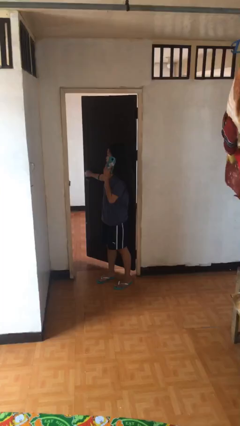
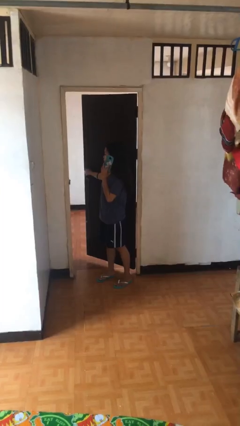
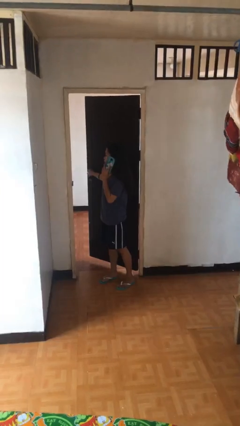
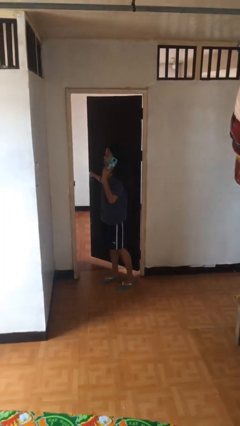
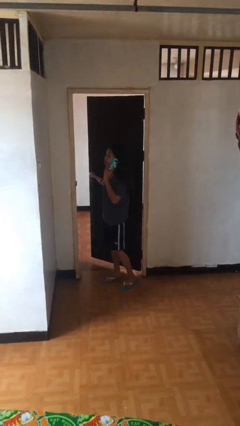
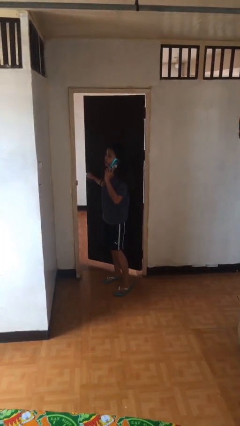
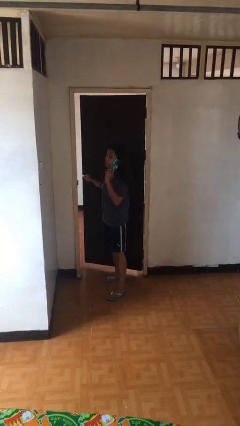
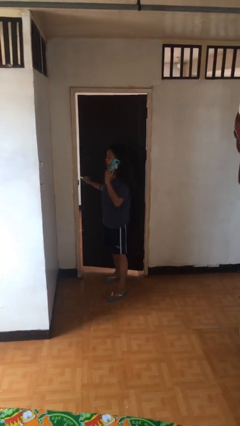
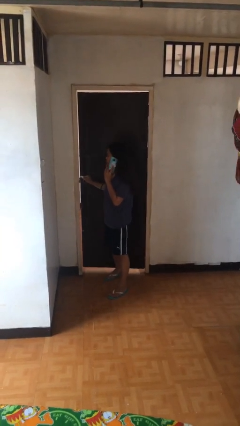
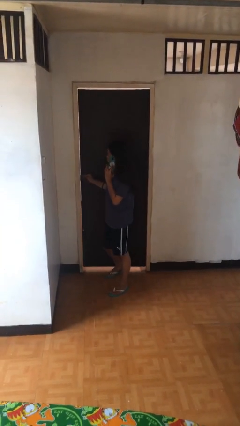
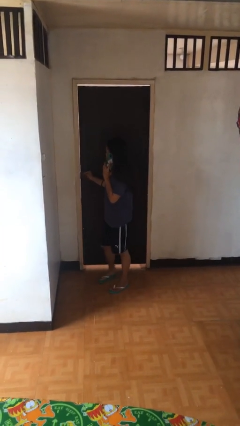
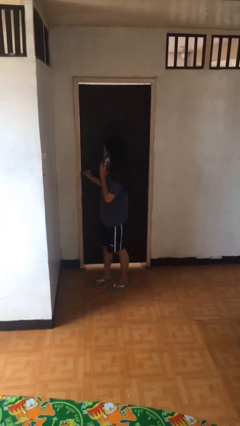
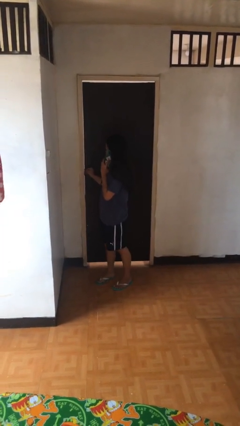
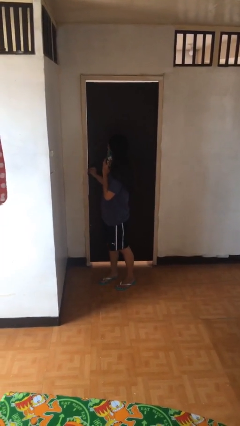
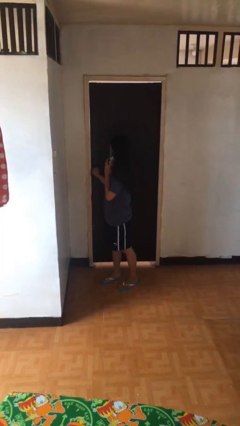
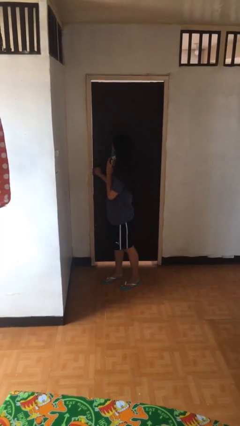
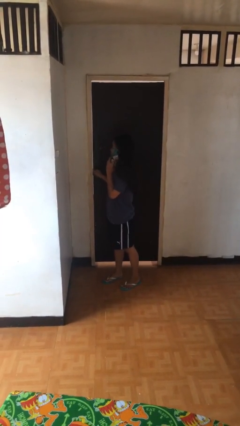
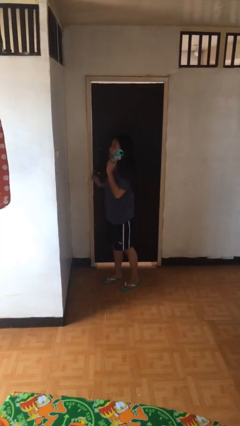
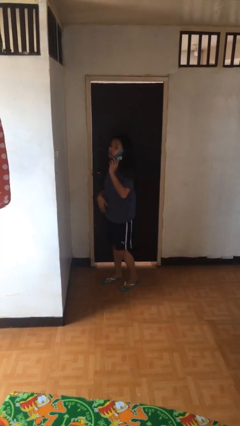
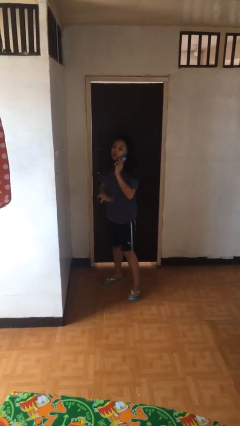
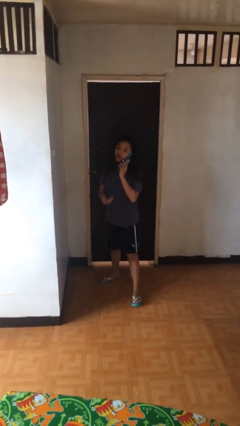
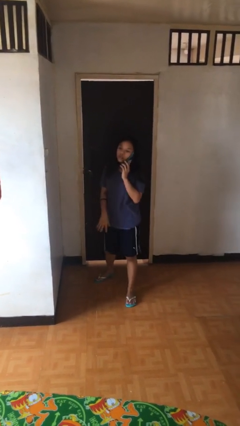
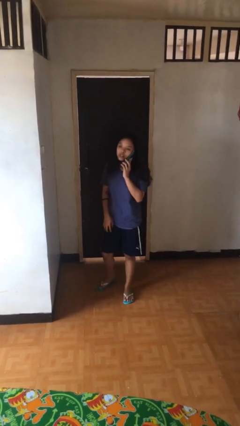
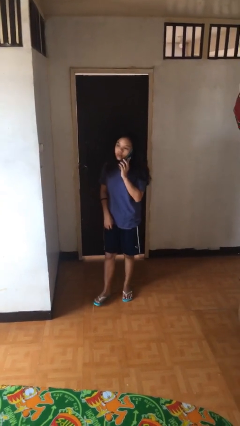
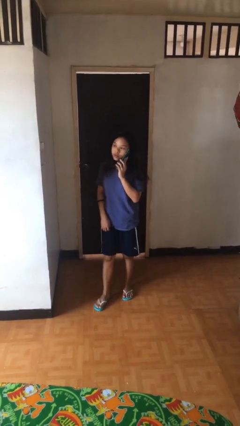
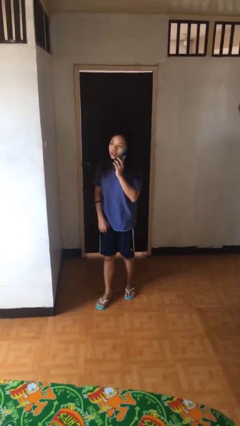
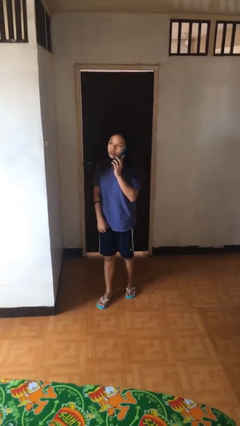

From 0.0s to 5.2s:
person closes facility door

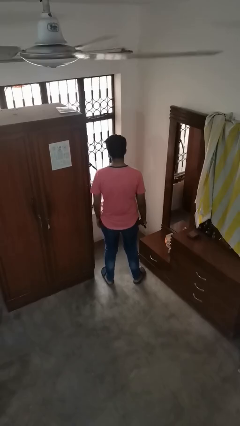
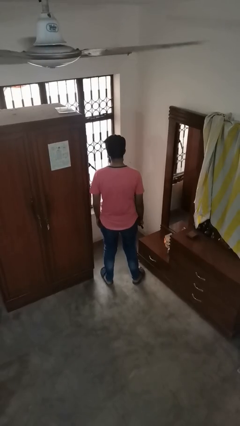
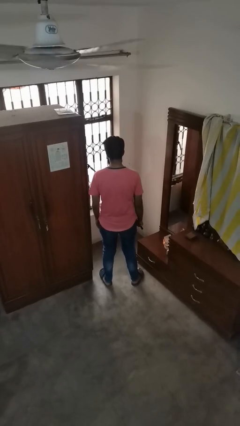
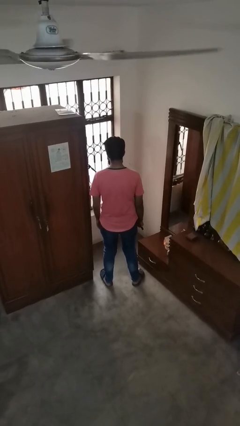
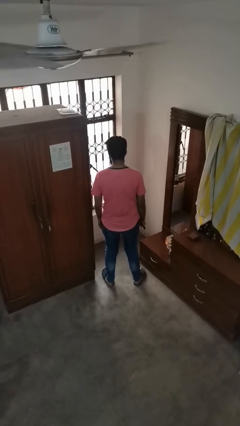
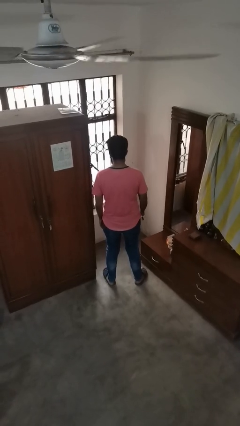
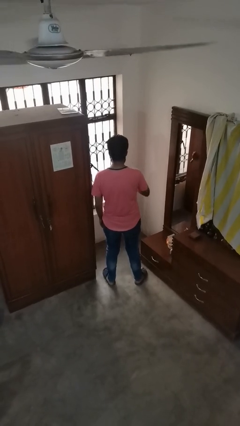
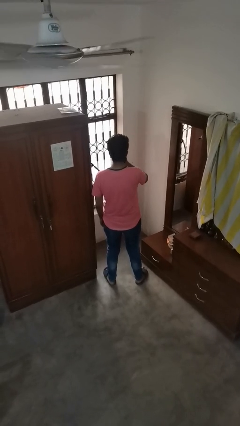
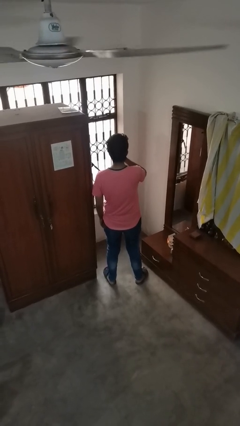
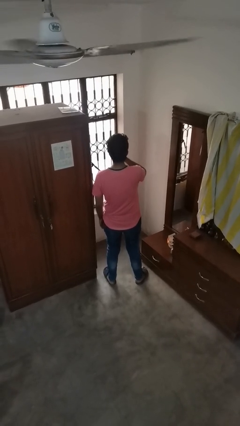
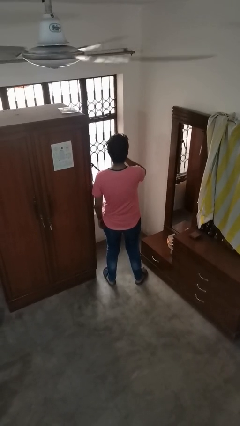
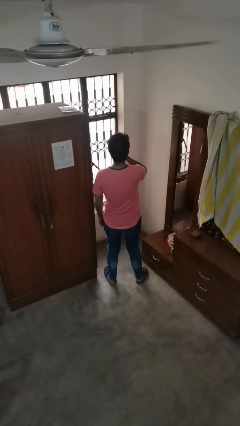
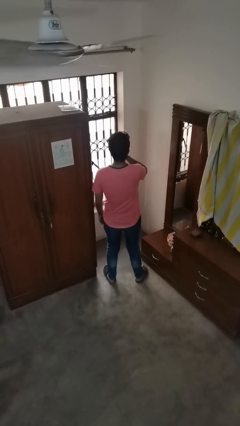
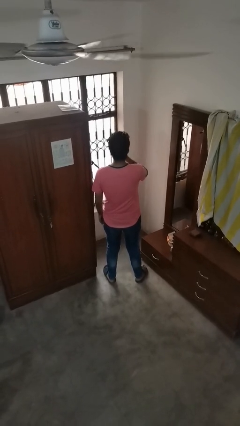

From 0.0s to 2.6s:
person vapes

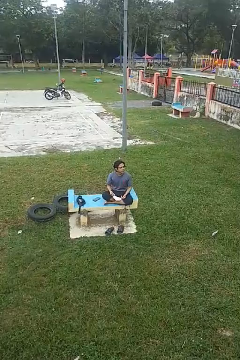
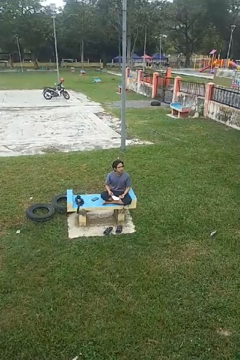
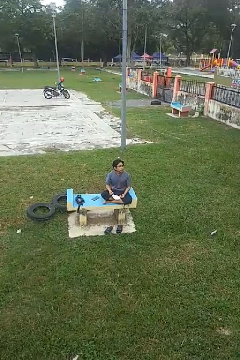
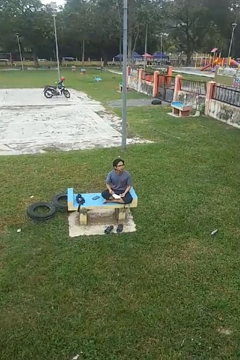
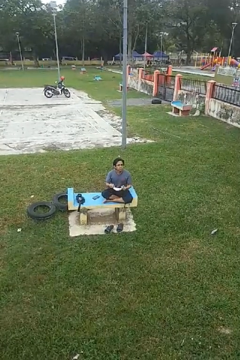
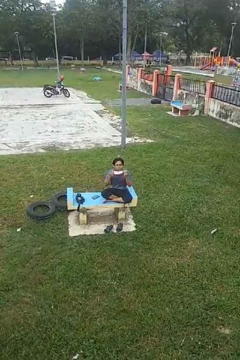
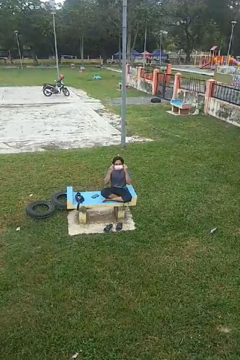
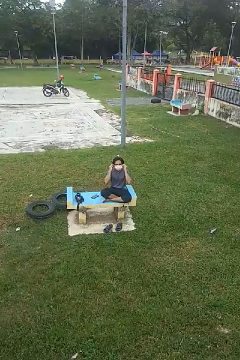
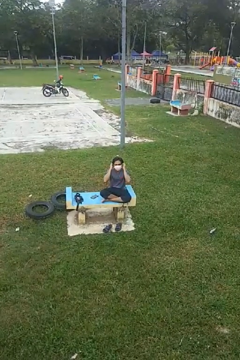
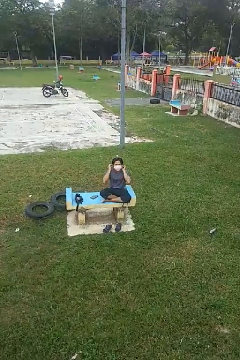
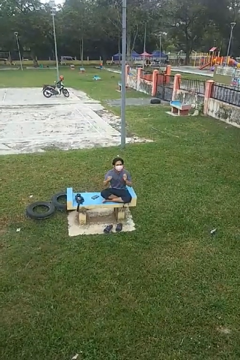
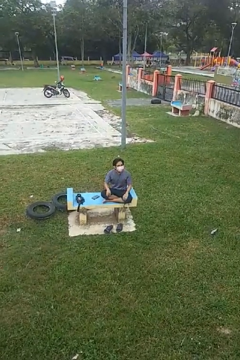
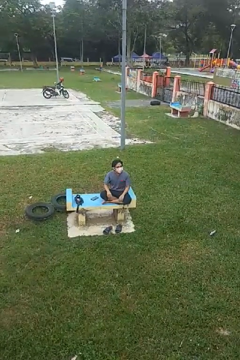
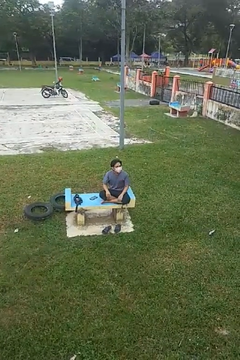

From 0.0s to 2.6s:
person puts on facemask

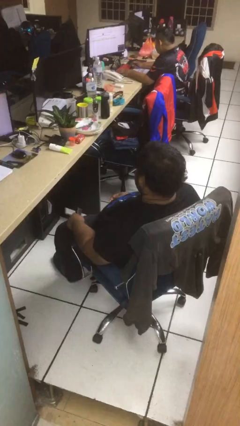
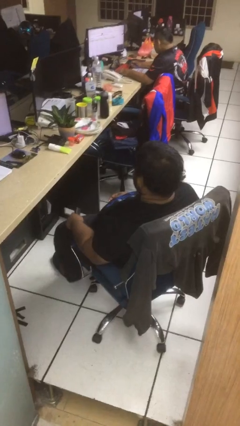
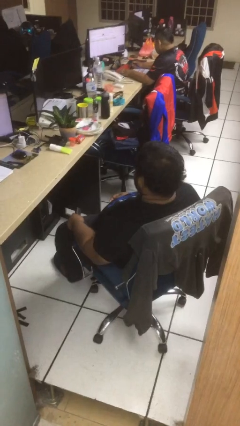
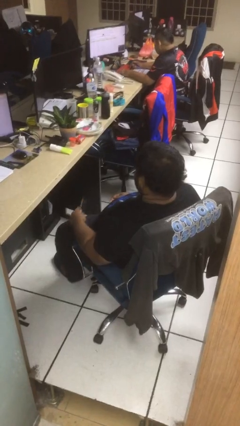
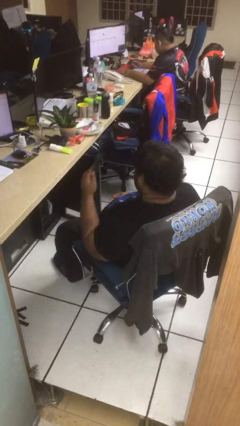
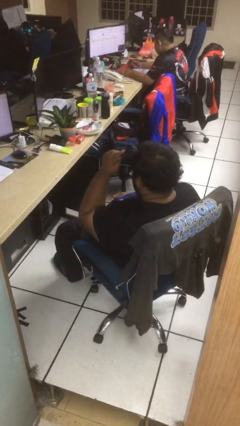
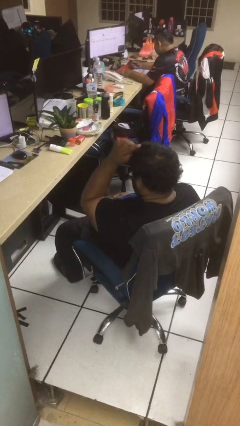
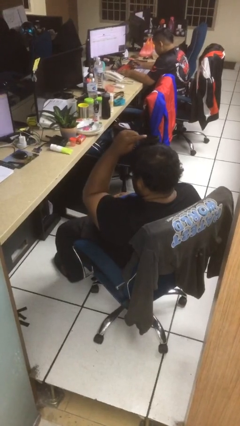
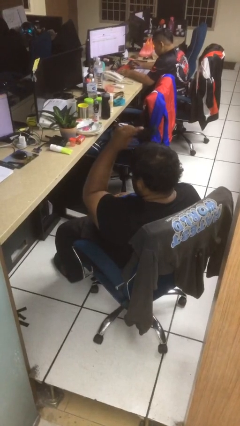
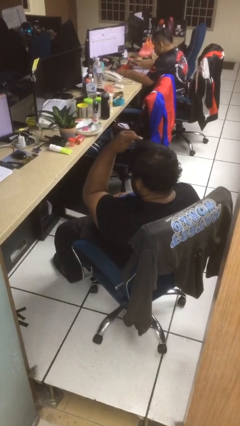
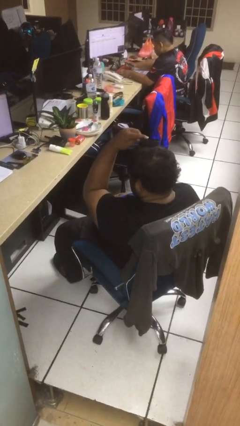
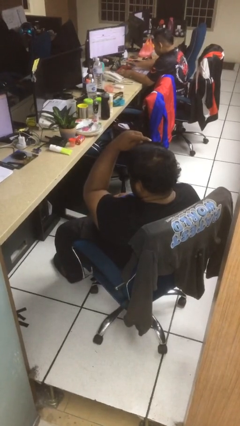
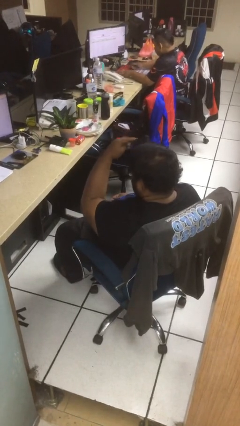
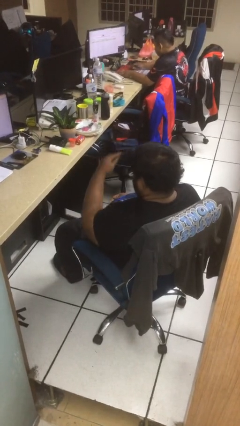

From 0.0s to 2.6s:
person brushes hair

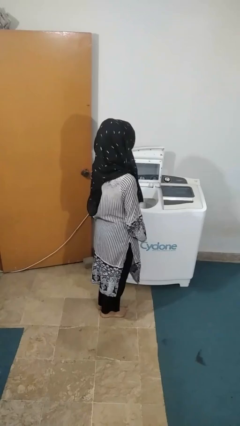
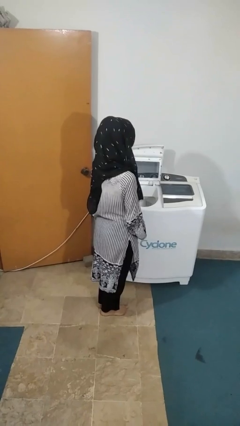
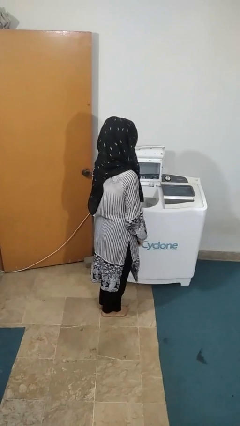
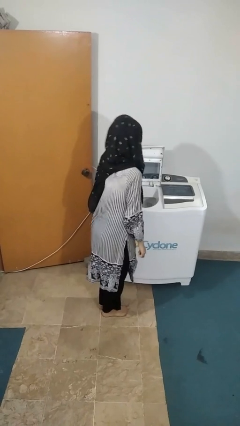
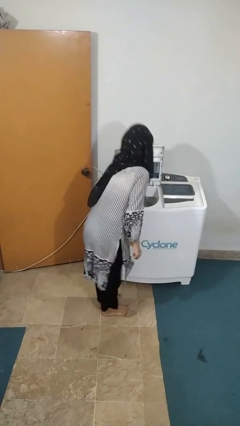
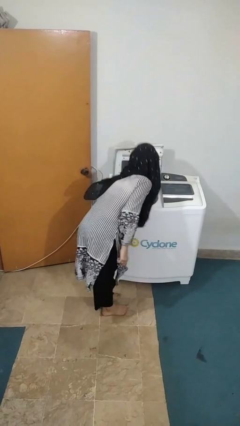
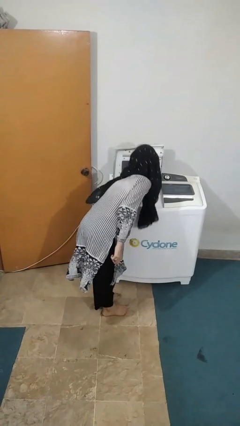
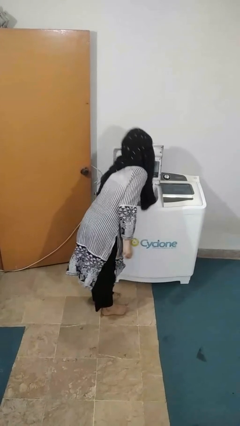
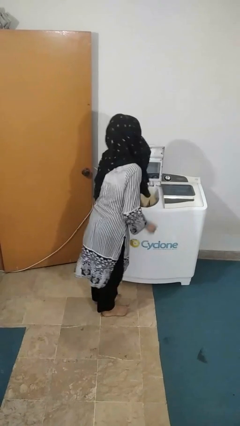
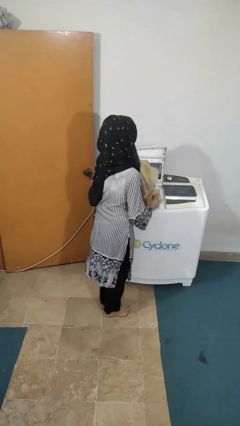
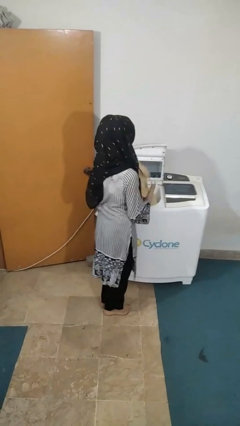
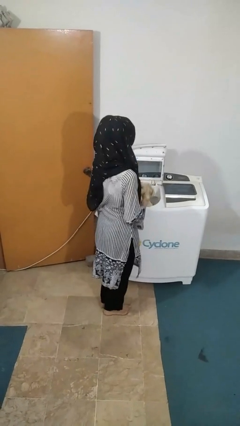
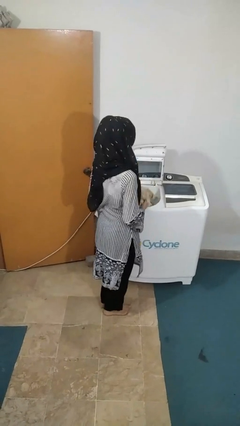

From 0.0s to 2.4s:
person unloads clotheswasher

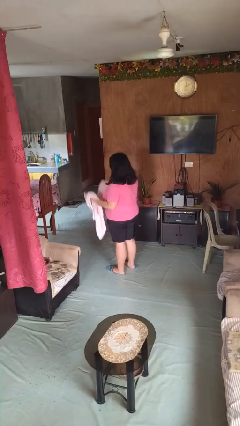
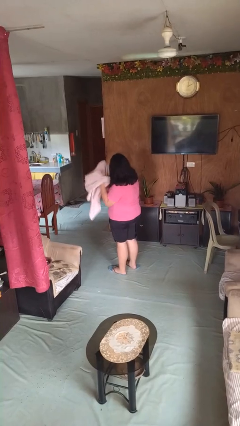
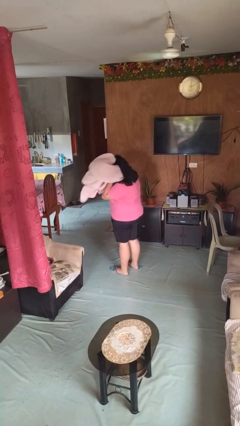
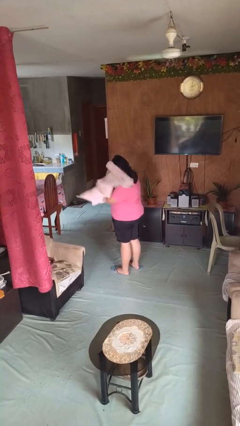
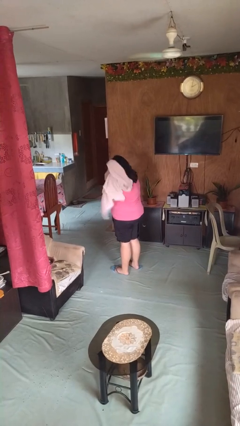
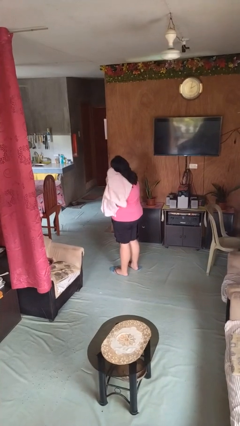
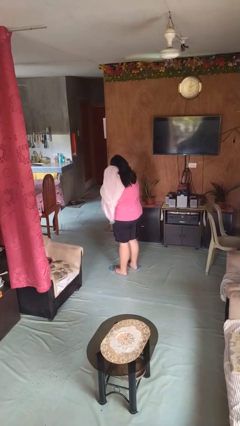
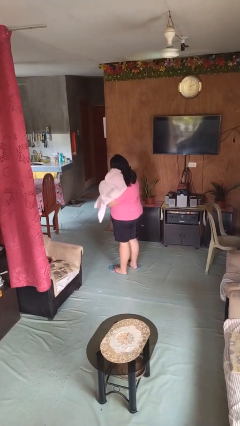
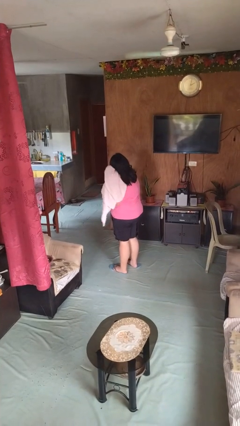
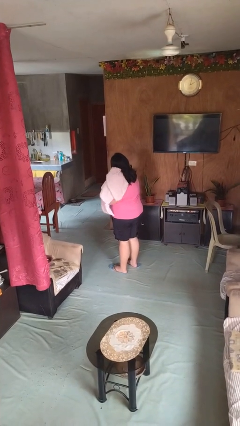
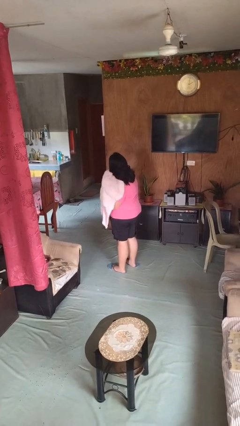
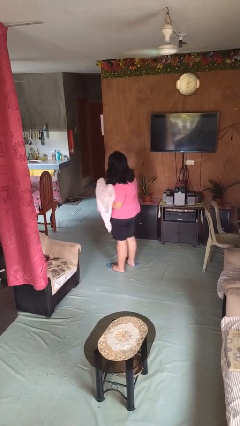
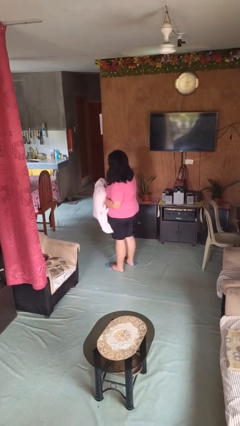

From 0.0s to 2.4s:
person dries hair with towel
